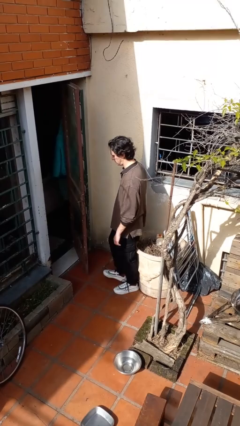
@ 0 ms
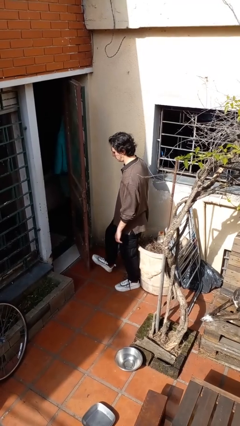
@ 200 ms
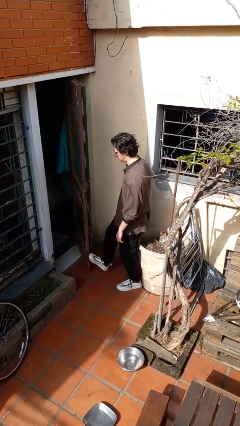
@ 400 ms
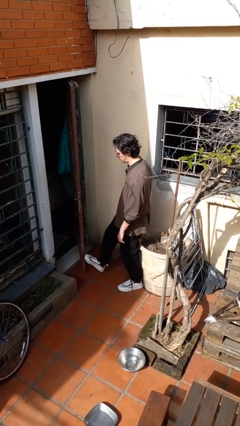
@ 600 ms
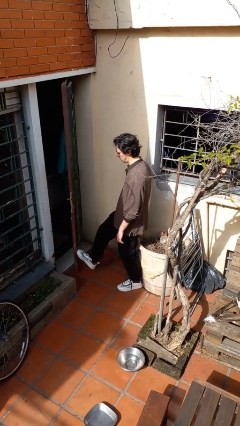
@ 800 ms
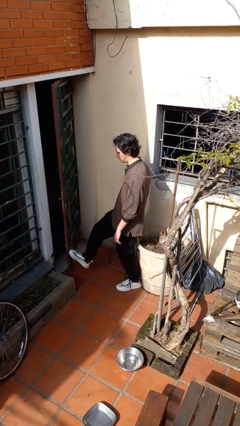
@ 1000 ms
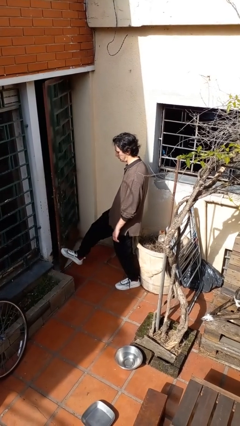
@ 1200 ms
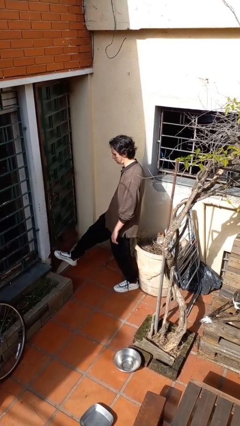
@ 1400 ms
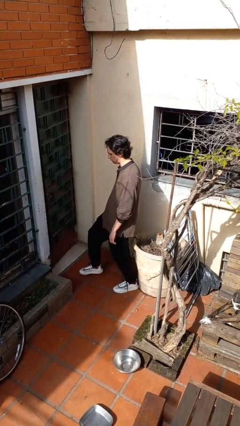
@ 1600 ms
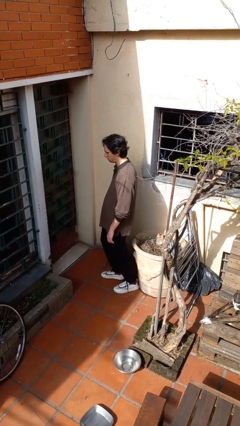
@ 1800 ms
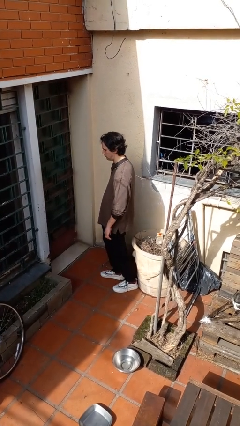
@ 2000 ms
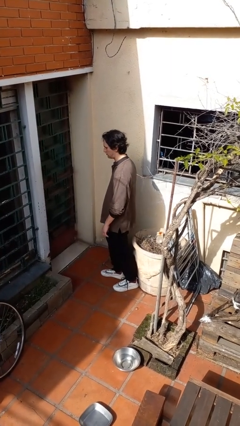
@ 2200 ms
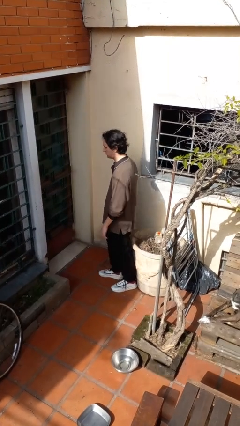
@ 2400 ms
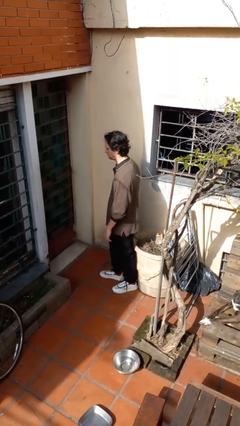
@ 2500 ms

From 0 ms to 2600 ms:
person closes door with foot

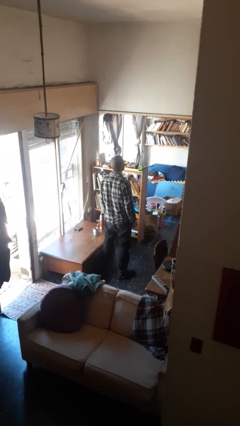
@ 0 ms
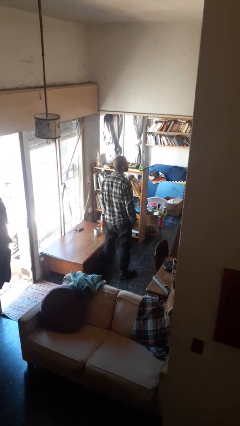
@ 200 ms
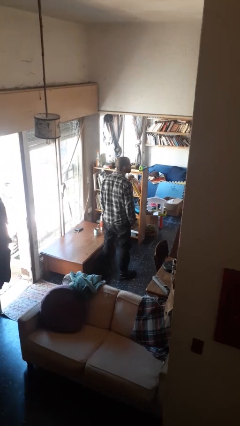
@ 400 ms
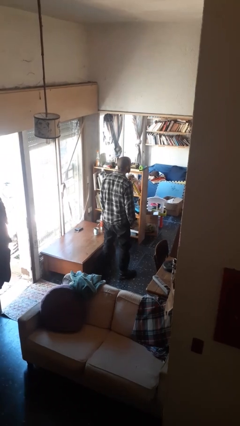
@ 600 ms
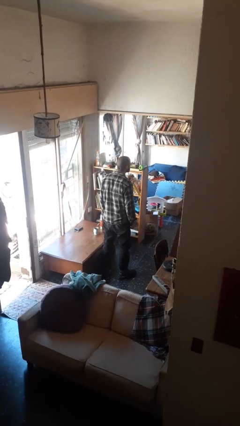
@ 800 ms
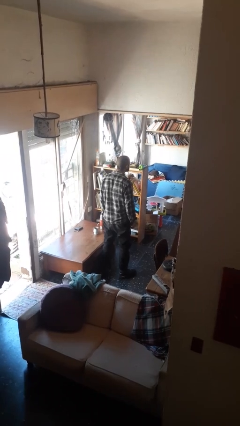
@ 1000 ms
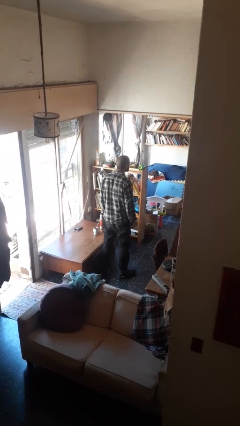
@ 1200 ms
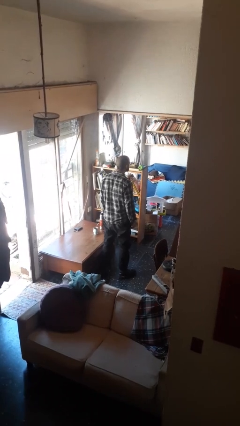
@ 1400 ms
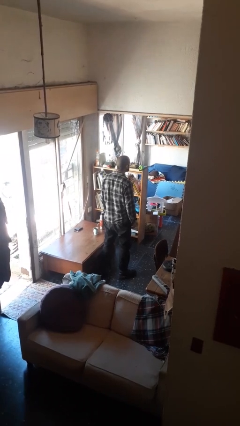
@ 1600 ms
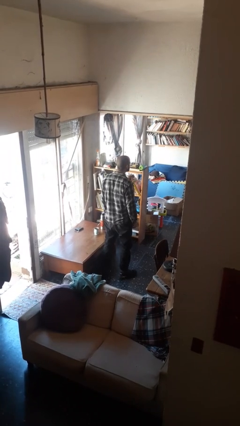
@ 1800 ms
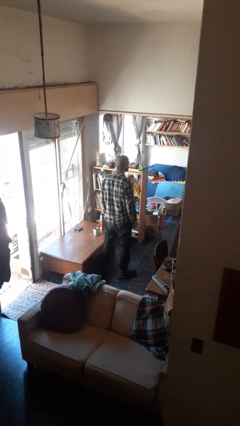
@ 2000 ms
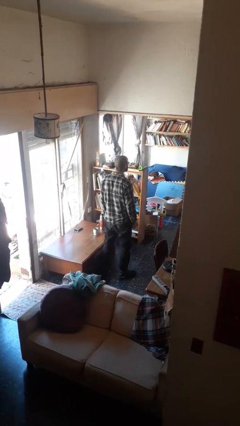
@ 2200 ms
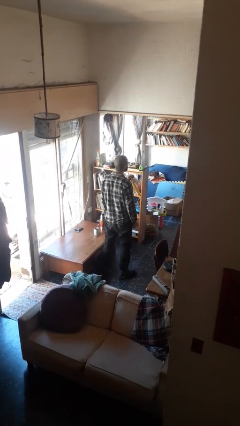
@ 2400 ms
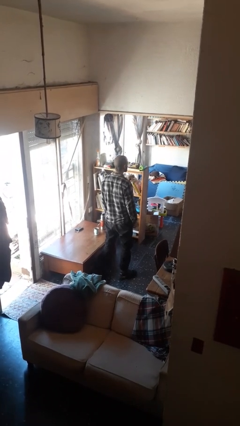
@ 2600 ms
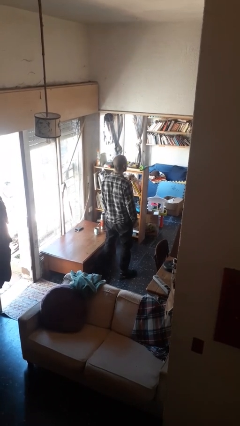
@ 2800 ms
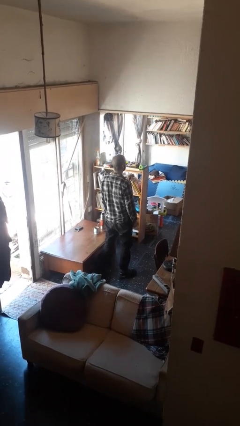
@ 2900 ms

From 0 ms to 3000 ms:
person sticks out tongue

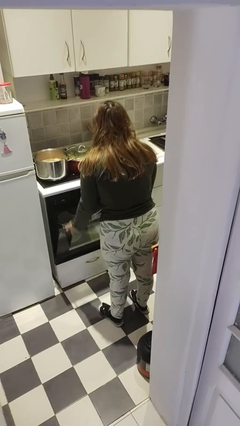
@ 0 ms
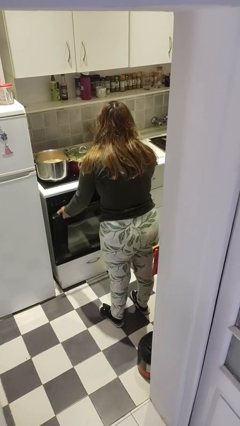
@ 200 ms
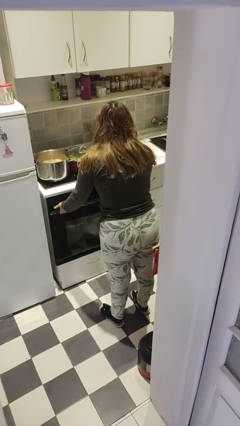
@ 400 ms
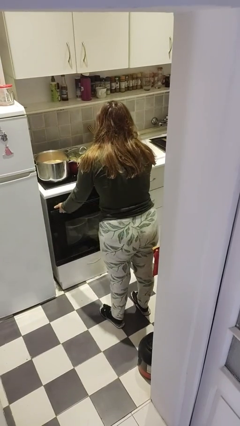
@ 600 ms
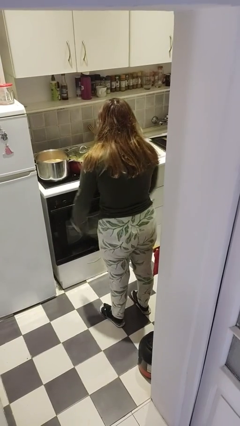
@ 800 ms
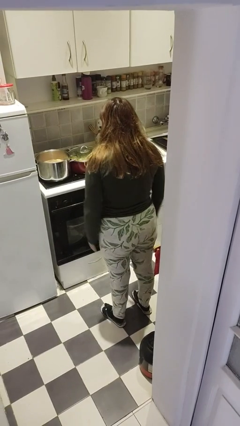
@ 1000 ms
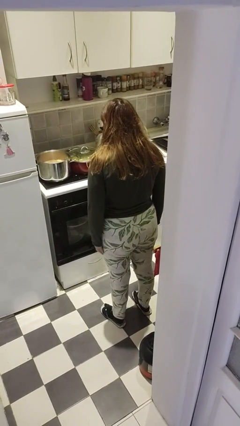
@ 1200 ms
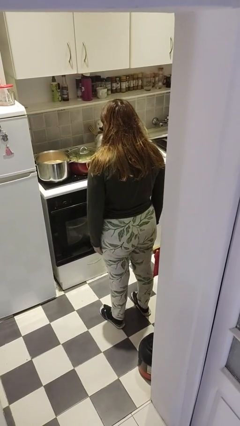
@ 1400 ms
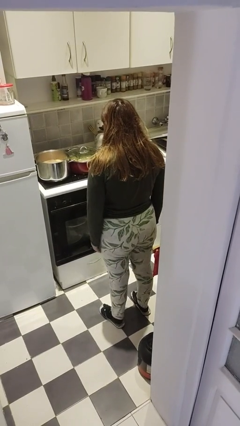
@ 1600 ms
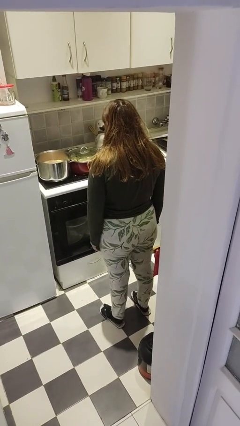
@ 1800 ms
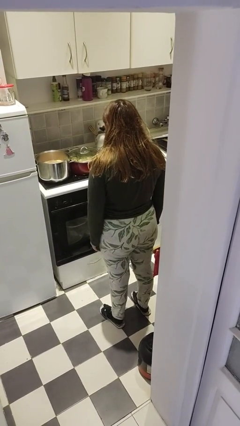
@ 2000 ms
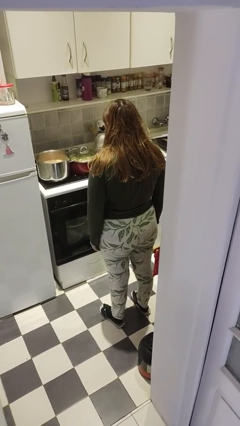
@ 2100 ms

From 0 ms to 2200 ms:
person closes dishwasher

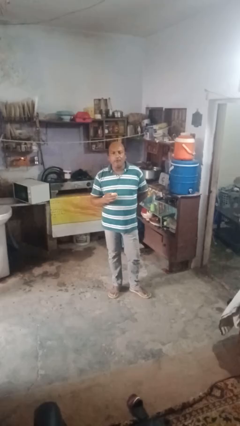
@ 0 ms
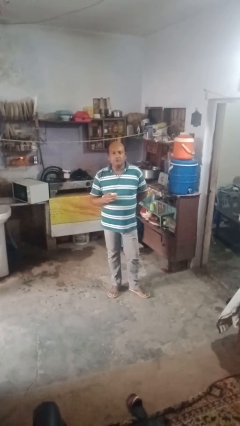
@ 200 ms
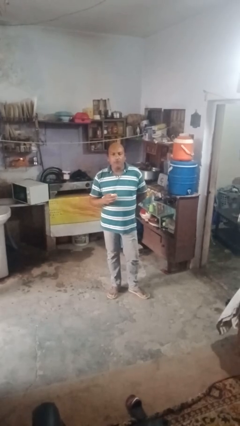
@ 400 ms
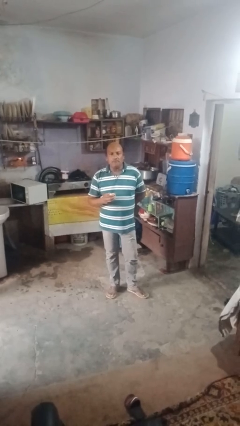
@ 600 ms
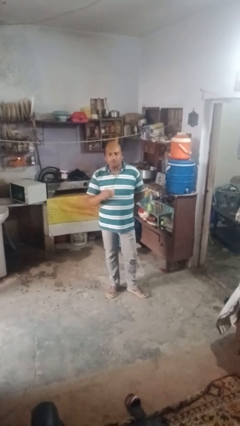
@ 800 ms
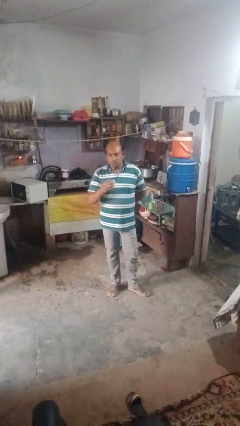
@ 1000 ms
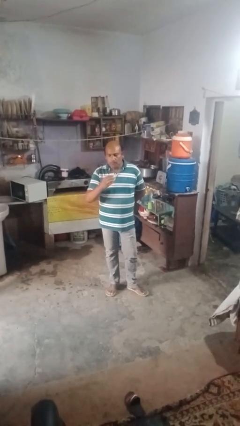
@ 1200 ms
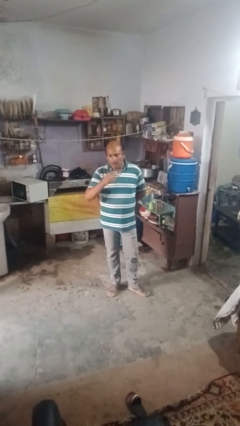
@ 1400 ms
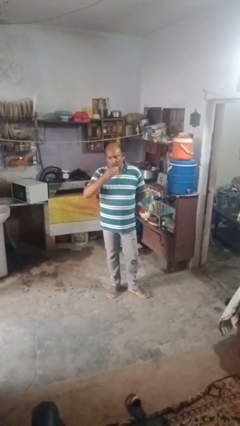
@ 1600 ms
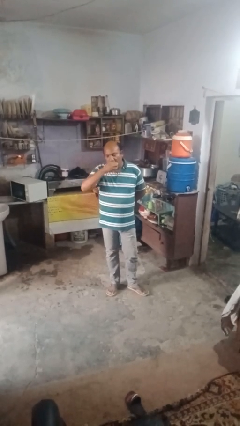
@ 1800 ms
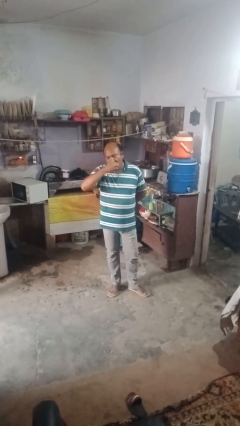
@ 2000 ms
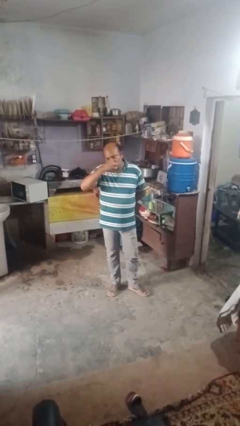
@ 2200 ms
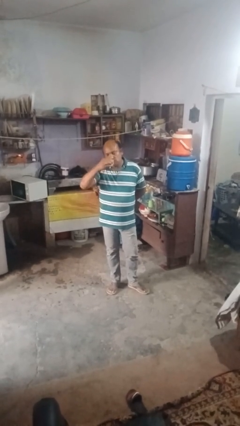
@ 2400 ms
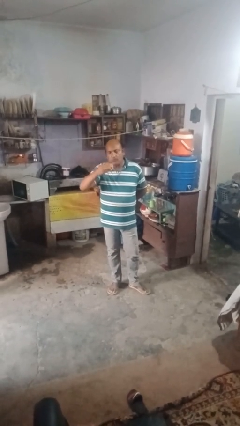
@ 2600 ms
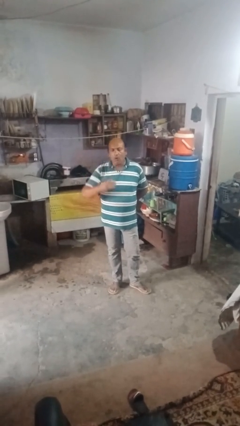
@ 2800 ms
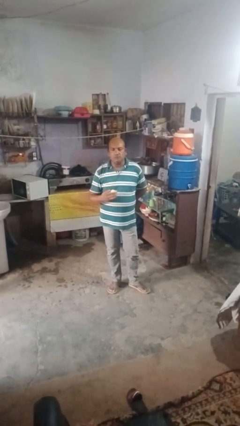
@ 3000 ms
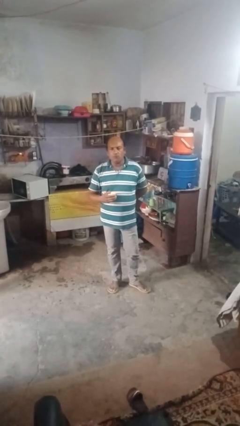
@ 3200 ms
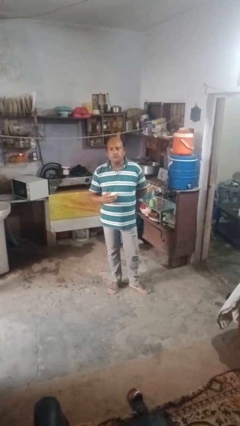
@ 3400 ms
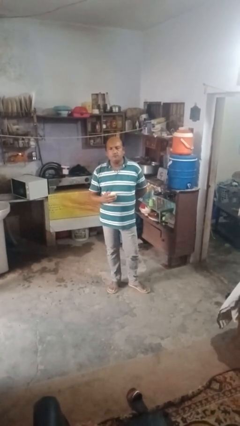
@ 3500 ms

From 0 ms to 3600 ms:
person eats apple

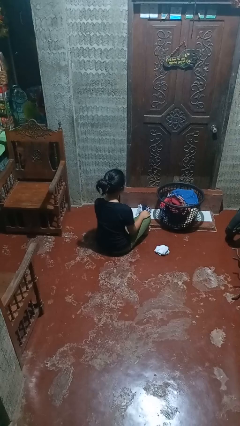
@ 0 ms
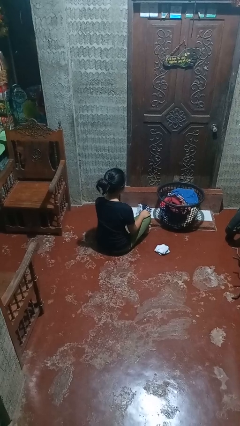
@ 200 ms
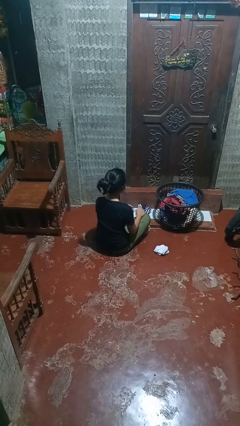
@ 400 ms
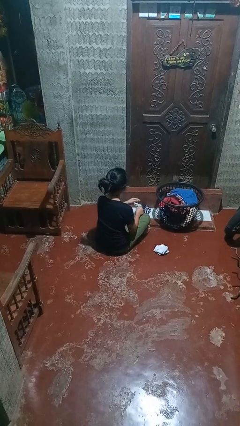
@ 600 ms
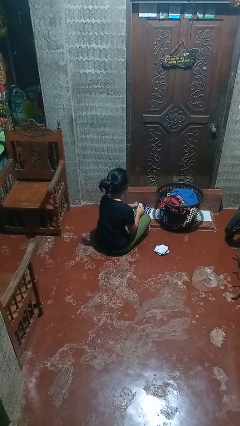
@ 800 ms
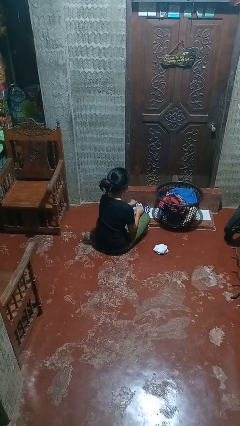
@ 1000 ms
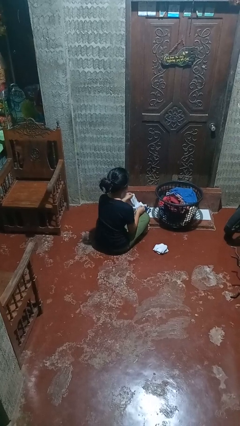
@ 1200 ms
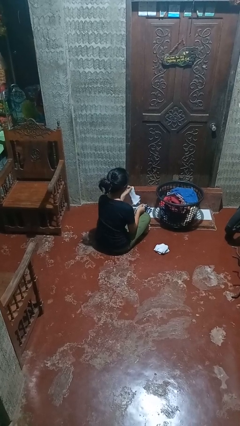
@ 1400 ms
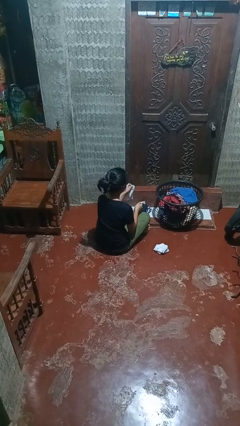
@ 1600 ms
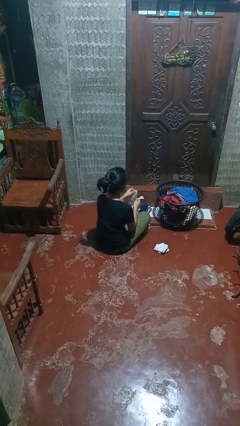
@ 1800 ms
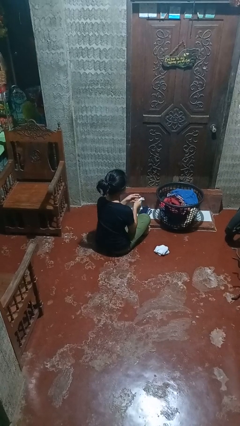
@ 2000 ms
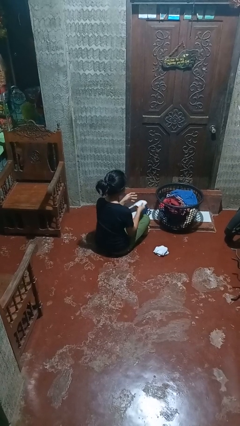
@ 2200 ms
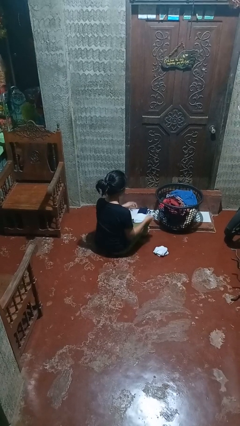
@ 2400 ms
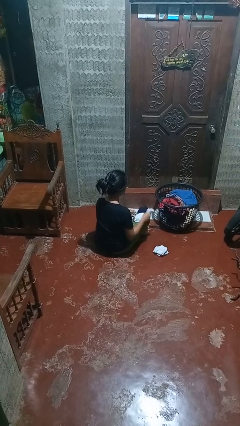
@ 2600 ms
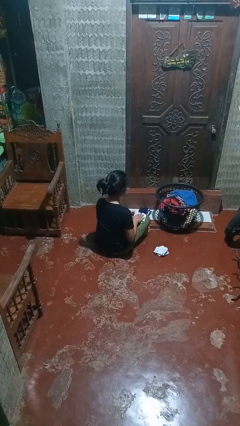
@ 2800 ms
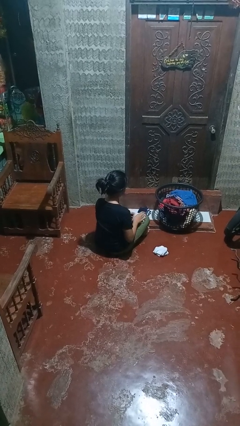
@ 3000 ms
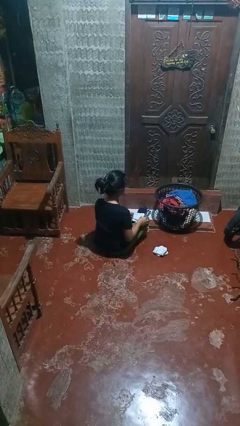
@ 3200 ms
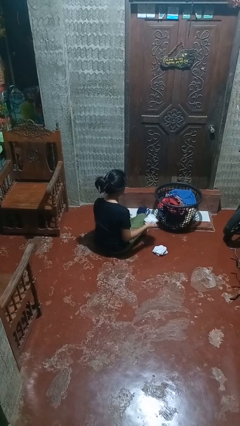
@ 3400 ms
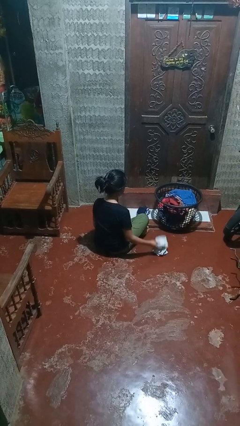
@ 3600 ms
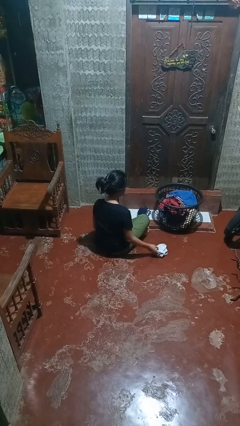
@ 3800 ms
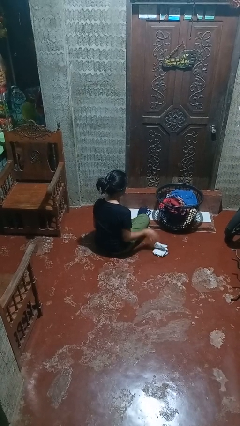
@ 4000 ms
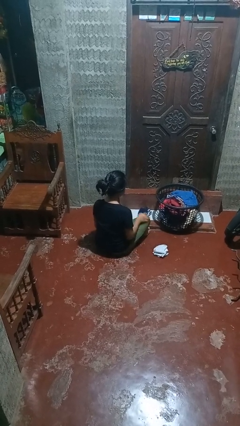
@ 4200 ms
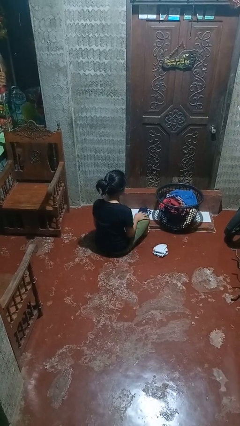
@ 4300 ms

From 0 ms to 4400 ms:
person folds socks

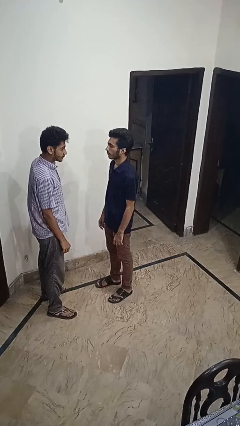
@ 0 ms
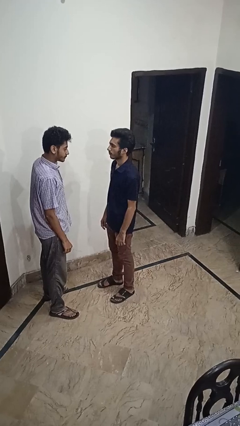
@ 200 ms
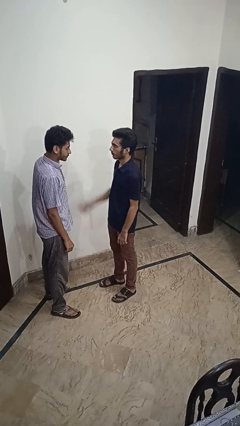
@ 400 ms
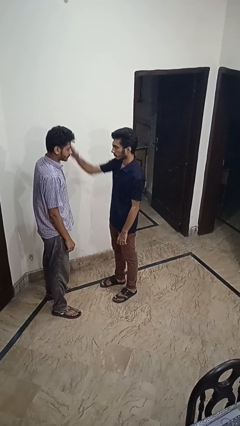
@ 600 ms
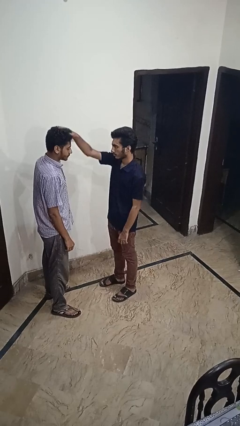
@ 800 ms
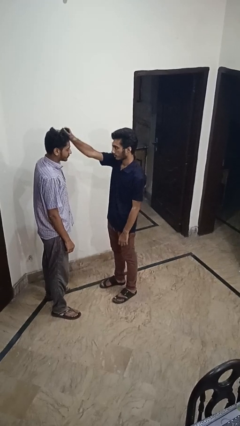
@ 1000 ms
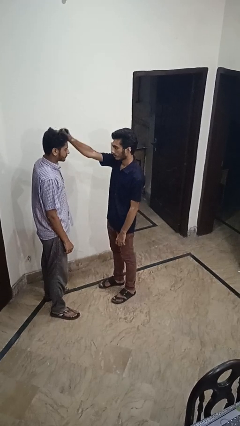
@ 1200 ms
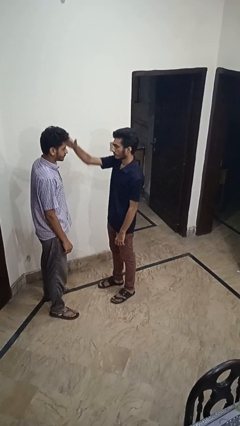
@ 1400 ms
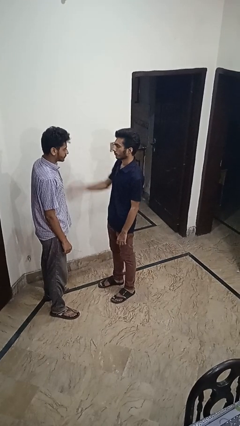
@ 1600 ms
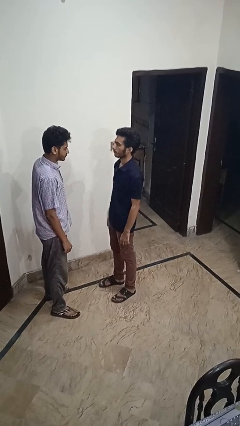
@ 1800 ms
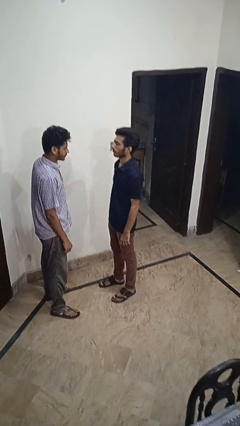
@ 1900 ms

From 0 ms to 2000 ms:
person grabs person by hair
